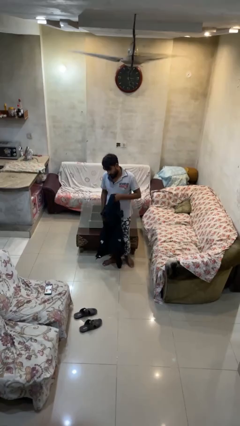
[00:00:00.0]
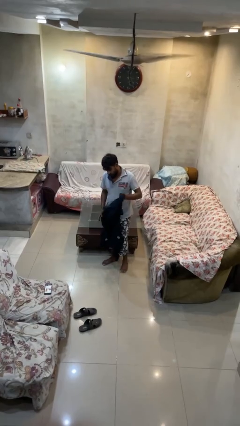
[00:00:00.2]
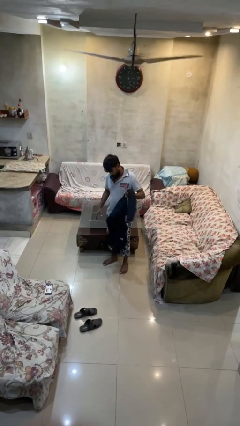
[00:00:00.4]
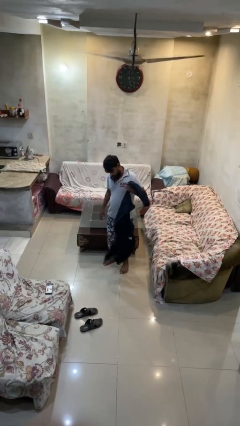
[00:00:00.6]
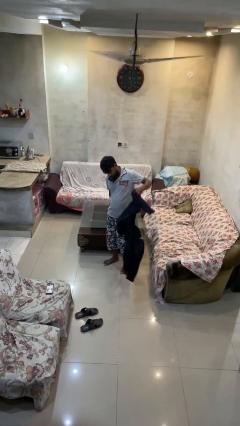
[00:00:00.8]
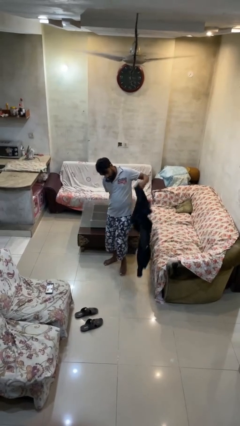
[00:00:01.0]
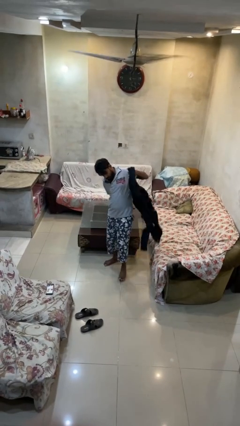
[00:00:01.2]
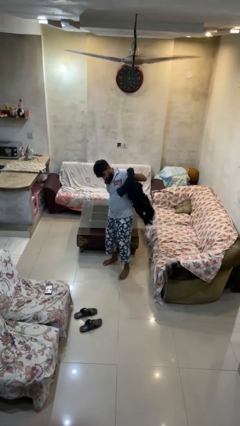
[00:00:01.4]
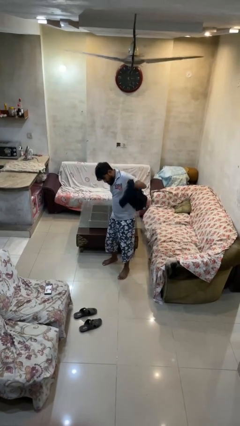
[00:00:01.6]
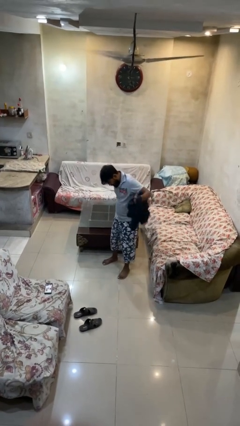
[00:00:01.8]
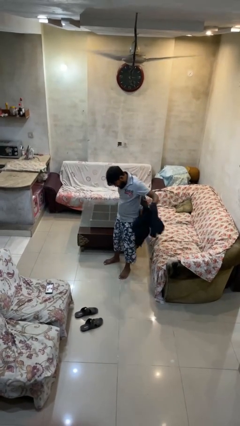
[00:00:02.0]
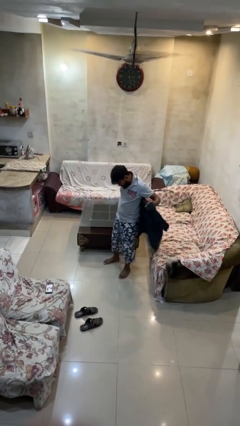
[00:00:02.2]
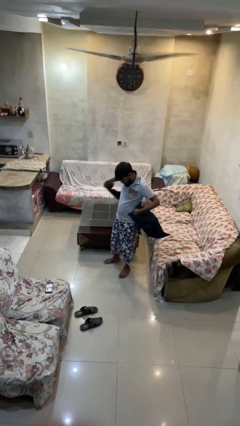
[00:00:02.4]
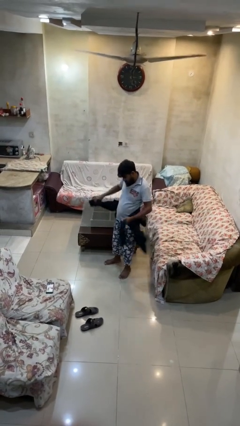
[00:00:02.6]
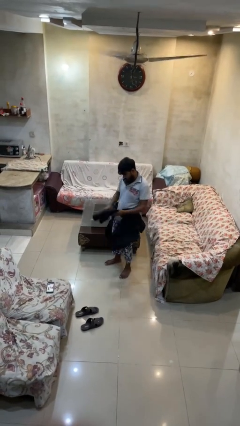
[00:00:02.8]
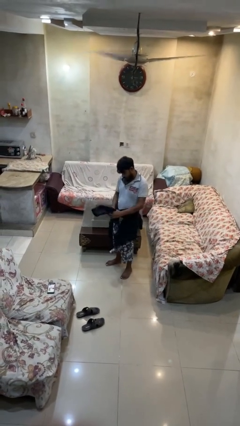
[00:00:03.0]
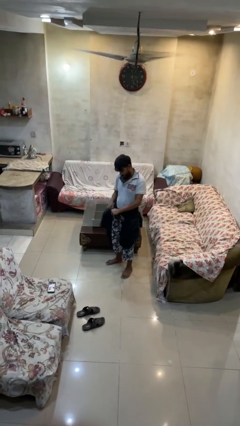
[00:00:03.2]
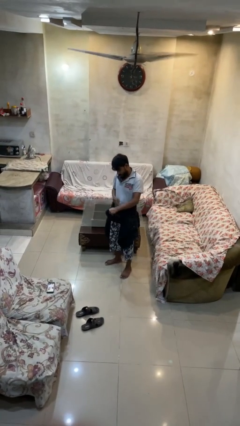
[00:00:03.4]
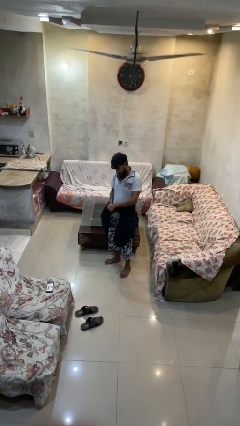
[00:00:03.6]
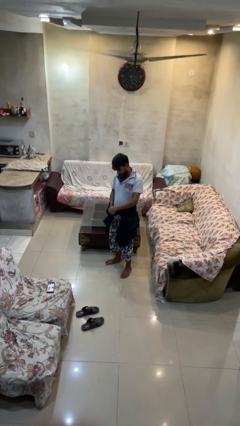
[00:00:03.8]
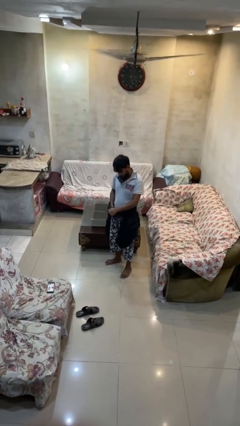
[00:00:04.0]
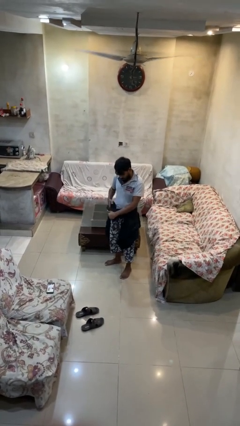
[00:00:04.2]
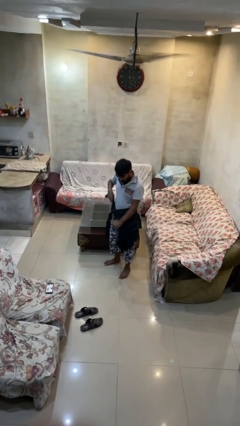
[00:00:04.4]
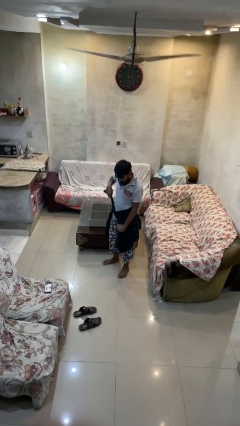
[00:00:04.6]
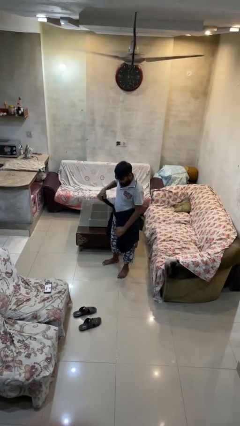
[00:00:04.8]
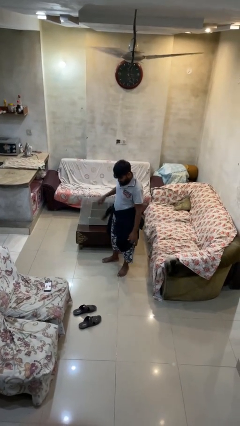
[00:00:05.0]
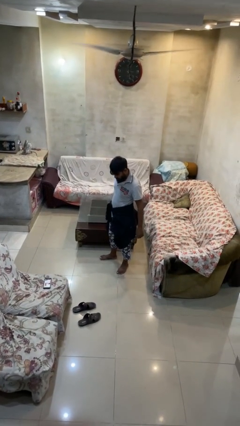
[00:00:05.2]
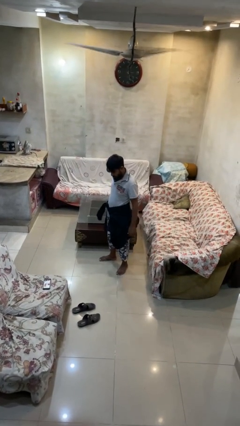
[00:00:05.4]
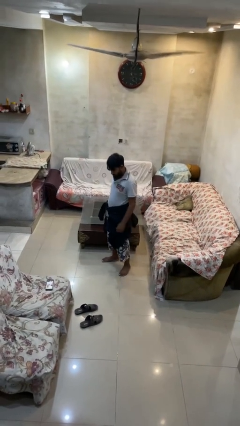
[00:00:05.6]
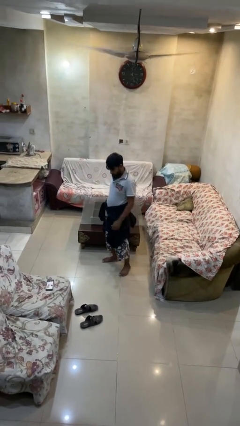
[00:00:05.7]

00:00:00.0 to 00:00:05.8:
person ties jacket around waist

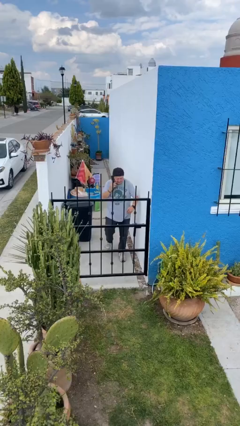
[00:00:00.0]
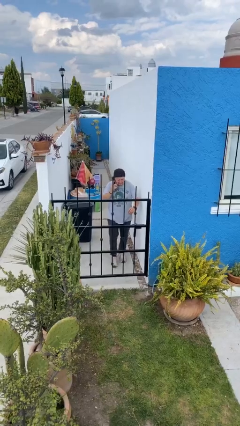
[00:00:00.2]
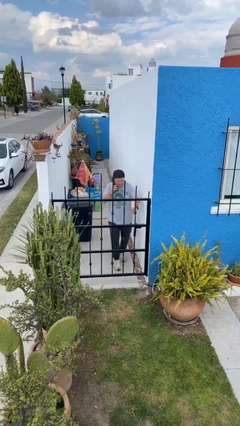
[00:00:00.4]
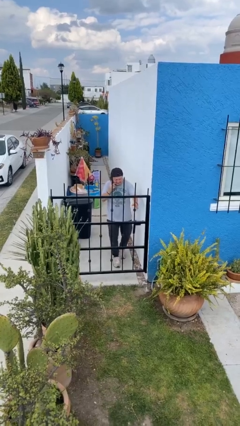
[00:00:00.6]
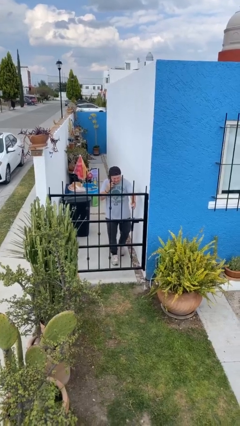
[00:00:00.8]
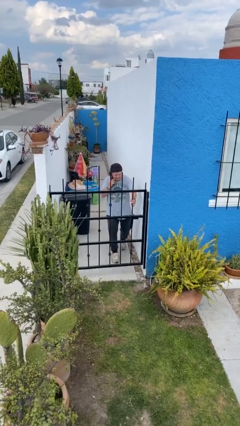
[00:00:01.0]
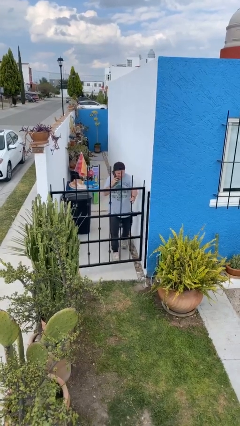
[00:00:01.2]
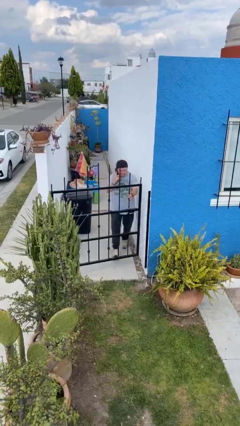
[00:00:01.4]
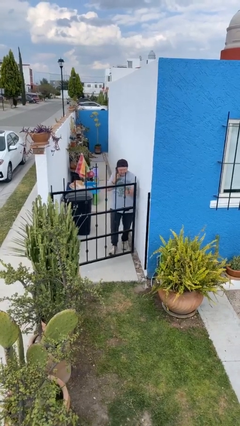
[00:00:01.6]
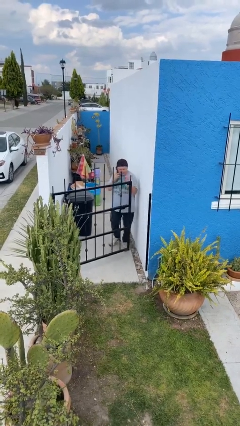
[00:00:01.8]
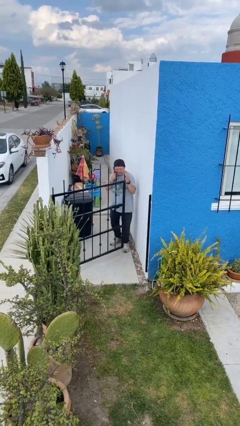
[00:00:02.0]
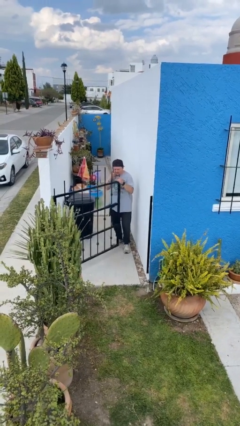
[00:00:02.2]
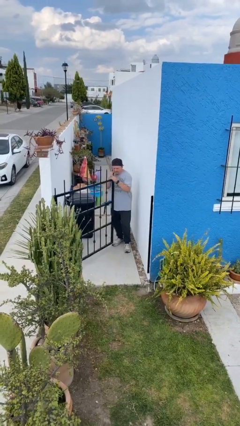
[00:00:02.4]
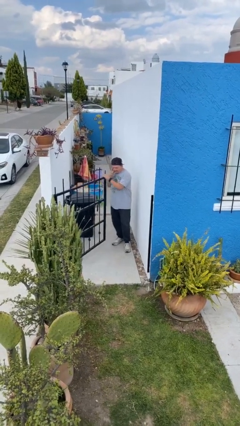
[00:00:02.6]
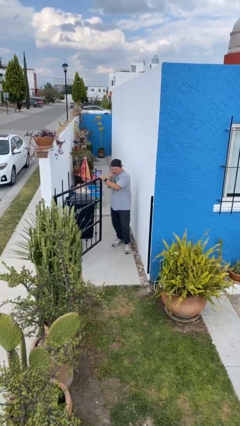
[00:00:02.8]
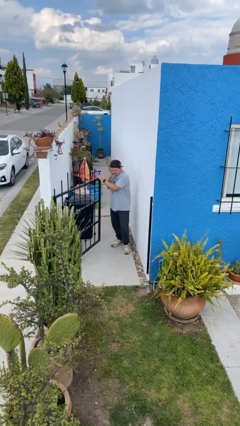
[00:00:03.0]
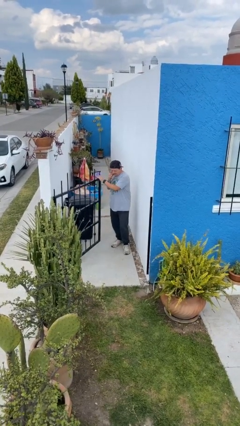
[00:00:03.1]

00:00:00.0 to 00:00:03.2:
person opens facility door

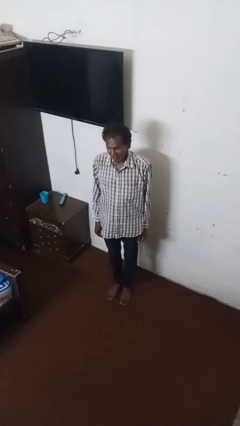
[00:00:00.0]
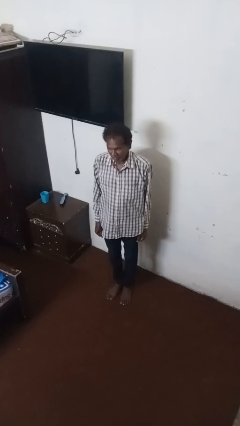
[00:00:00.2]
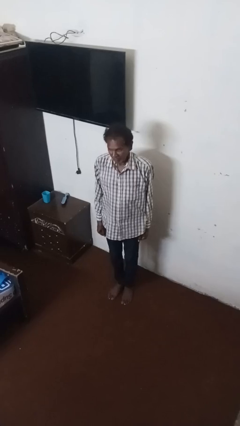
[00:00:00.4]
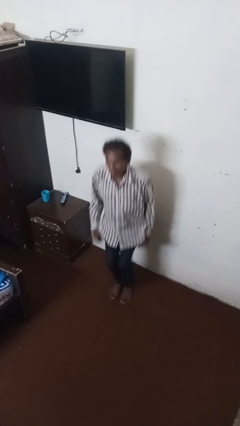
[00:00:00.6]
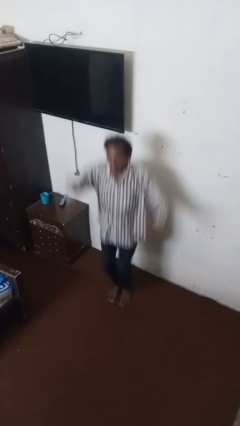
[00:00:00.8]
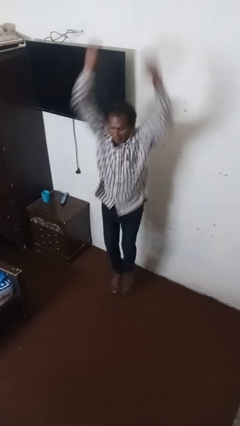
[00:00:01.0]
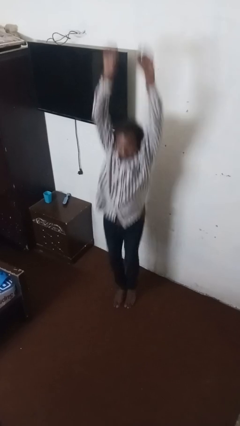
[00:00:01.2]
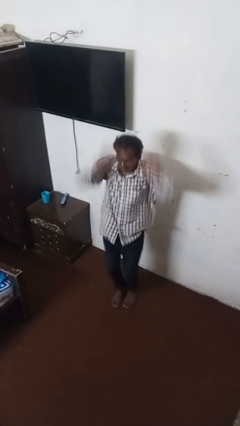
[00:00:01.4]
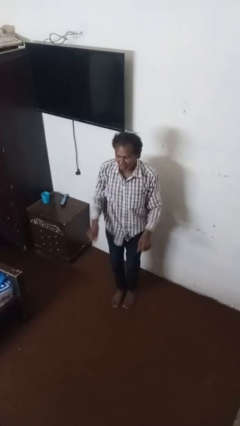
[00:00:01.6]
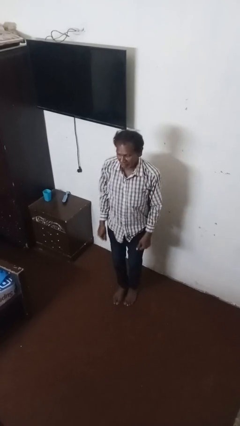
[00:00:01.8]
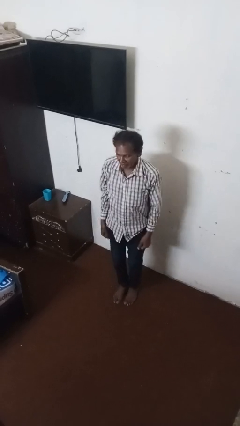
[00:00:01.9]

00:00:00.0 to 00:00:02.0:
person jumps

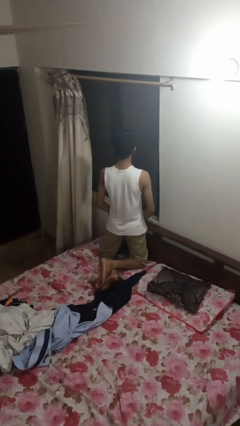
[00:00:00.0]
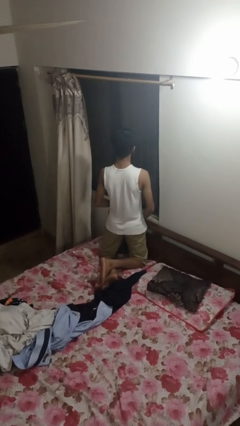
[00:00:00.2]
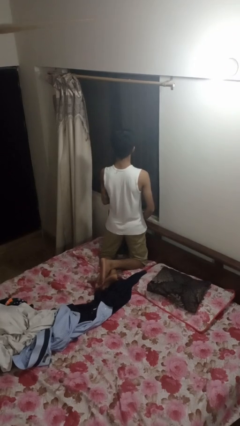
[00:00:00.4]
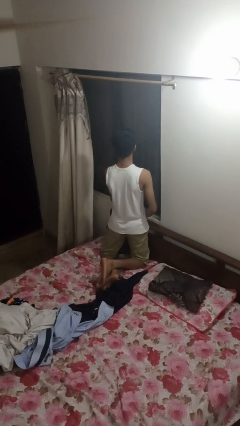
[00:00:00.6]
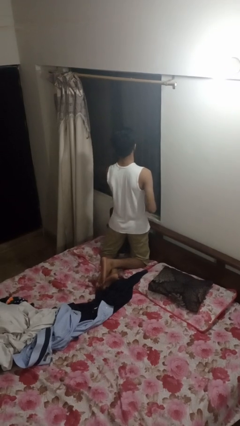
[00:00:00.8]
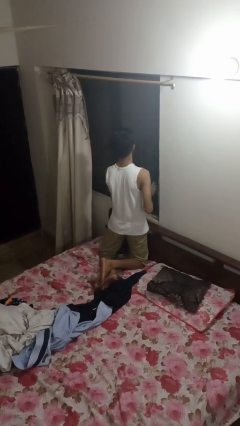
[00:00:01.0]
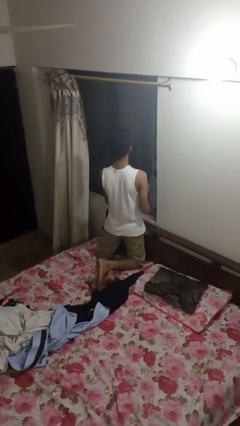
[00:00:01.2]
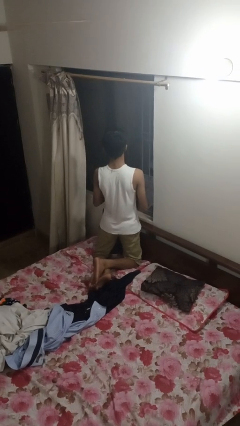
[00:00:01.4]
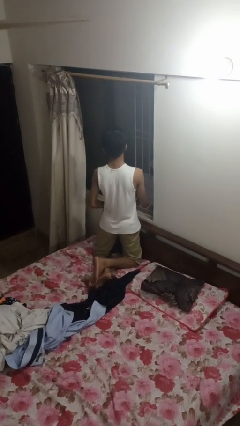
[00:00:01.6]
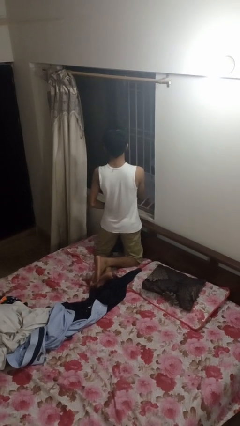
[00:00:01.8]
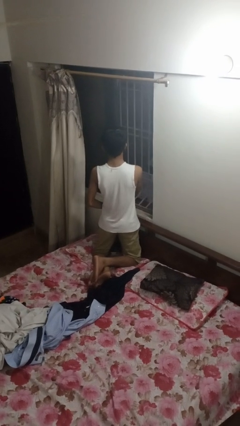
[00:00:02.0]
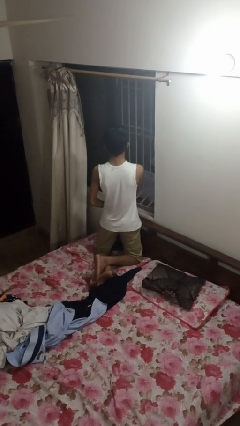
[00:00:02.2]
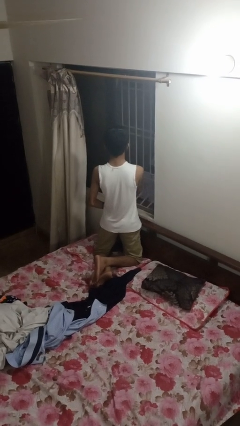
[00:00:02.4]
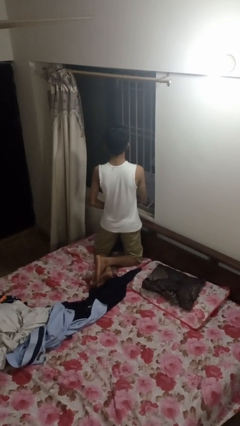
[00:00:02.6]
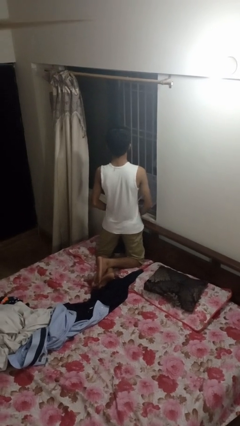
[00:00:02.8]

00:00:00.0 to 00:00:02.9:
person opens home window

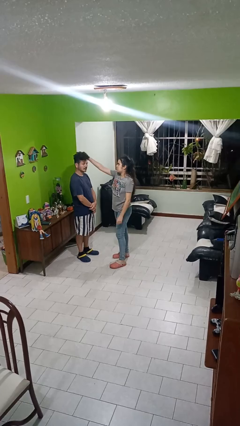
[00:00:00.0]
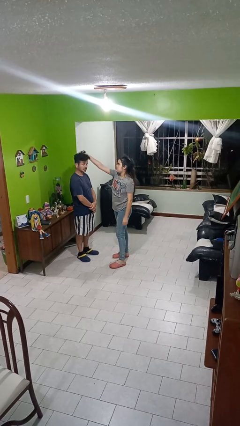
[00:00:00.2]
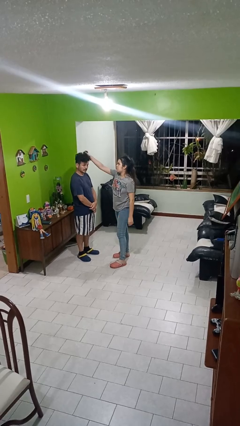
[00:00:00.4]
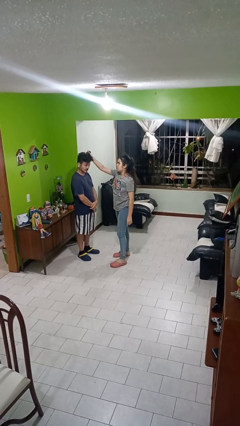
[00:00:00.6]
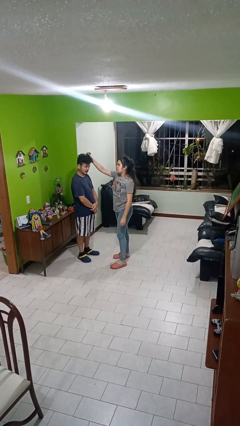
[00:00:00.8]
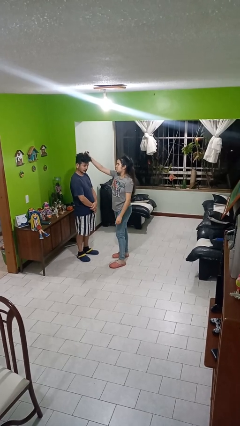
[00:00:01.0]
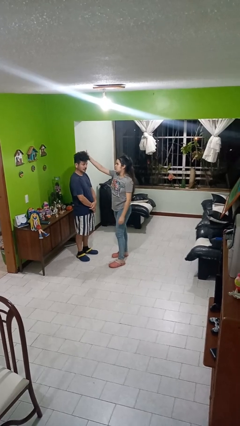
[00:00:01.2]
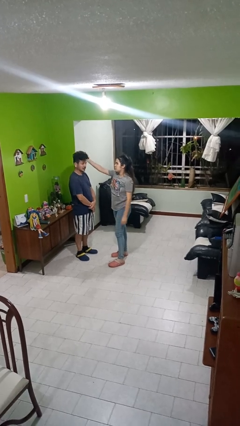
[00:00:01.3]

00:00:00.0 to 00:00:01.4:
person grabs person by hair

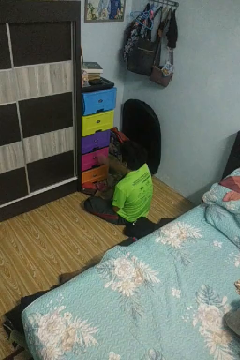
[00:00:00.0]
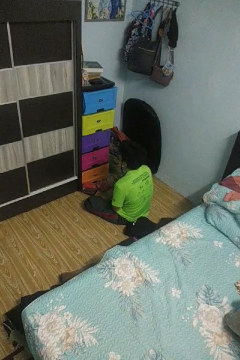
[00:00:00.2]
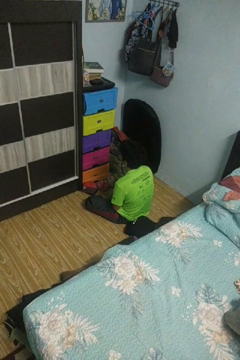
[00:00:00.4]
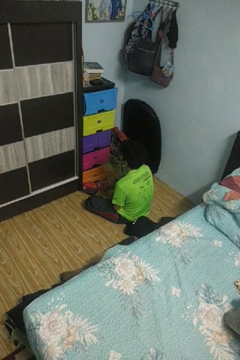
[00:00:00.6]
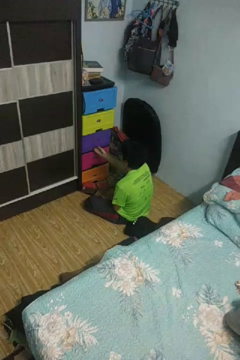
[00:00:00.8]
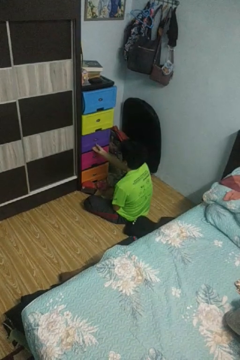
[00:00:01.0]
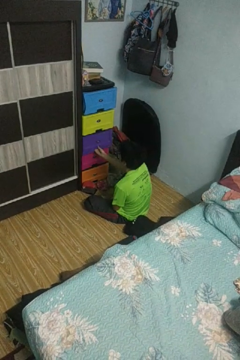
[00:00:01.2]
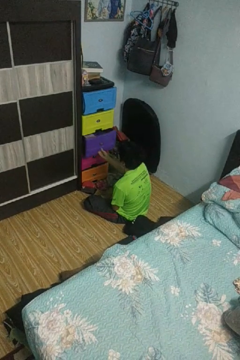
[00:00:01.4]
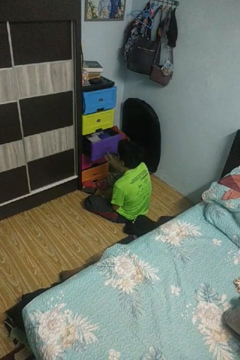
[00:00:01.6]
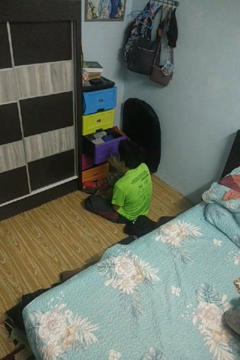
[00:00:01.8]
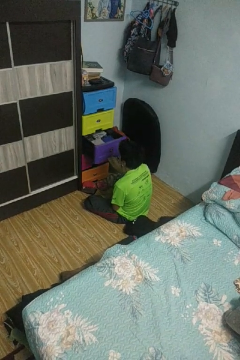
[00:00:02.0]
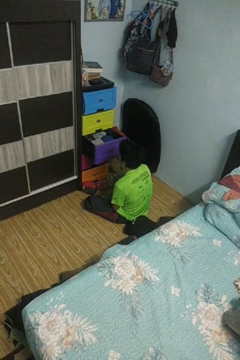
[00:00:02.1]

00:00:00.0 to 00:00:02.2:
person opens dresser drawer
